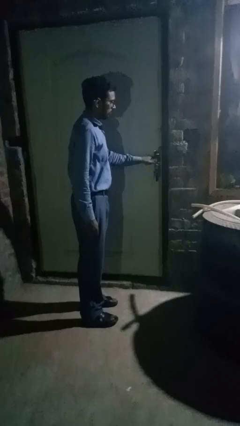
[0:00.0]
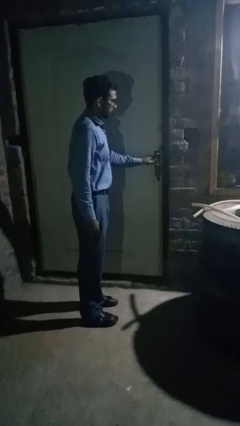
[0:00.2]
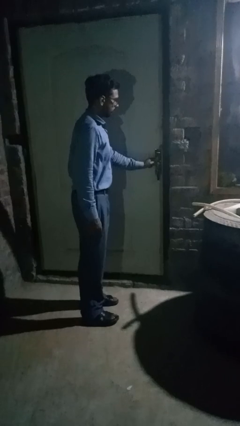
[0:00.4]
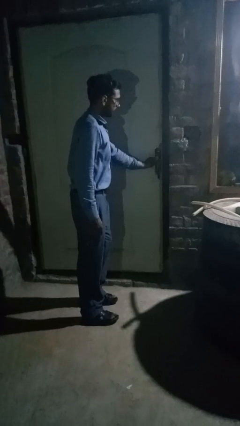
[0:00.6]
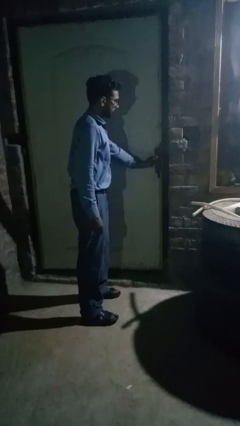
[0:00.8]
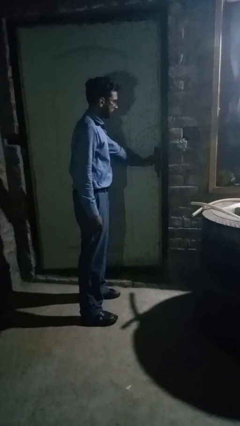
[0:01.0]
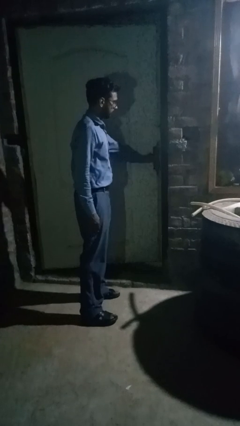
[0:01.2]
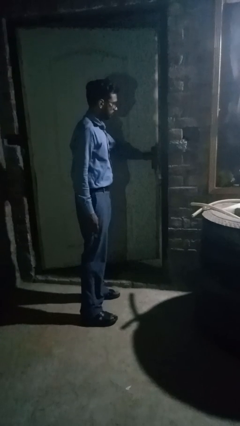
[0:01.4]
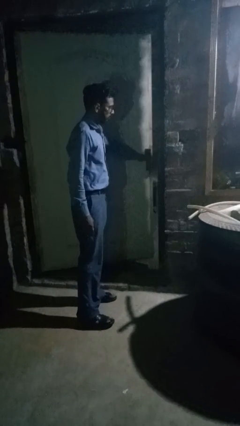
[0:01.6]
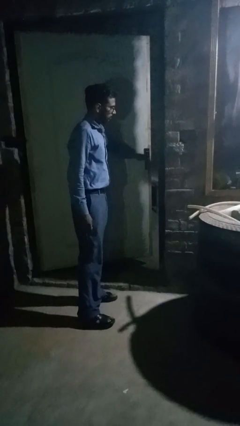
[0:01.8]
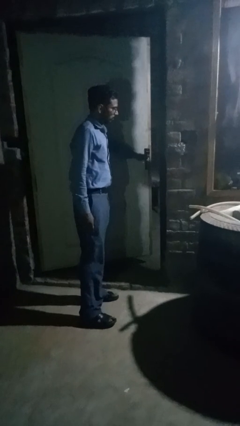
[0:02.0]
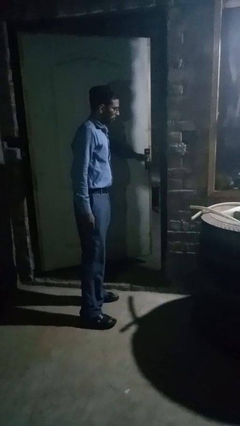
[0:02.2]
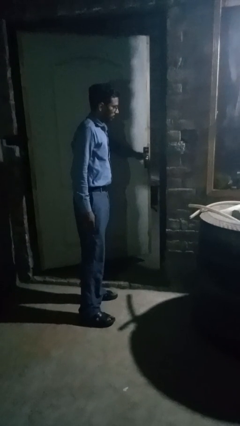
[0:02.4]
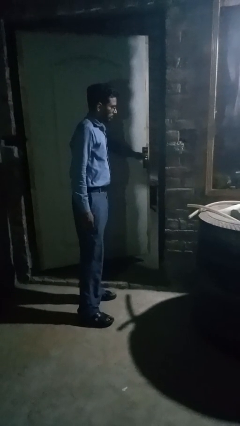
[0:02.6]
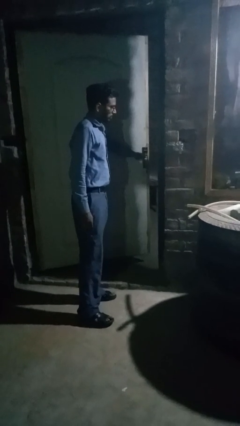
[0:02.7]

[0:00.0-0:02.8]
person opens facility door

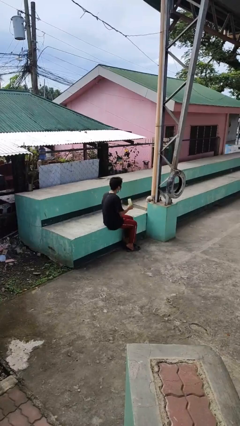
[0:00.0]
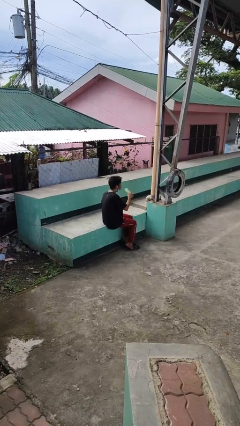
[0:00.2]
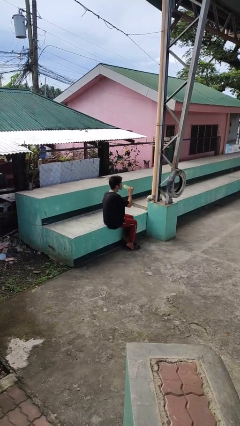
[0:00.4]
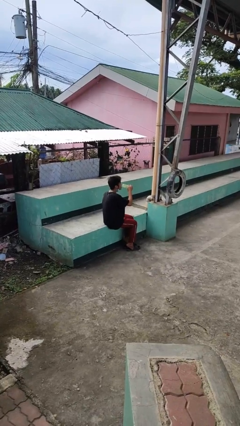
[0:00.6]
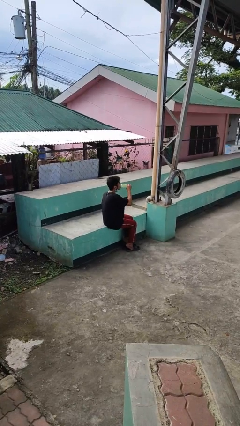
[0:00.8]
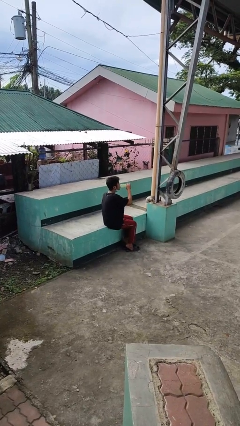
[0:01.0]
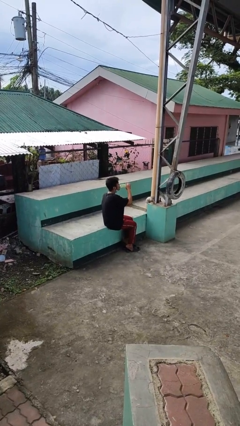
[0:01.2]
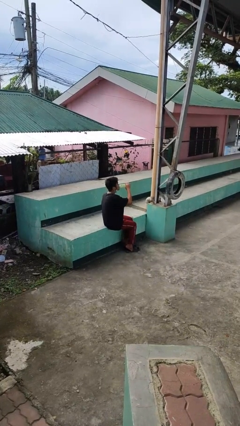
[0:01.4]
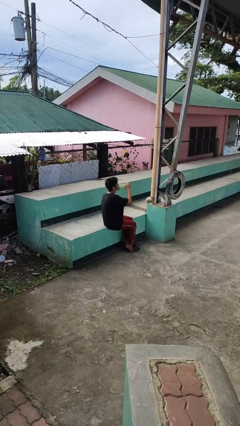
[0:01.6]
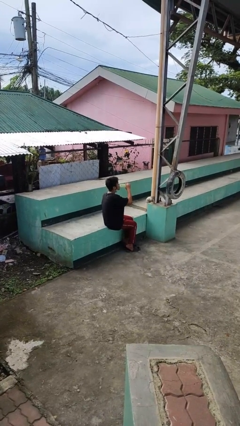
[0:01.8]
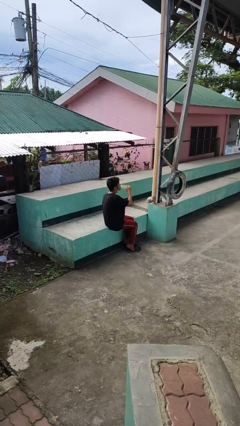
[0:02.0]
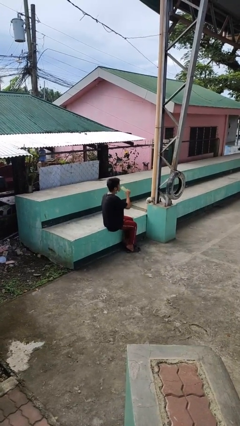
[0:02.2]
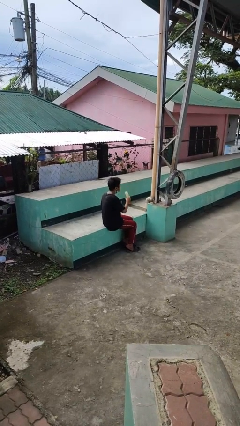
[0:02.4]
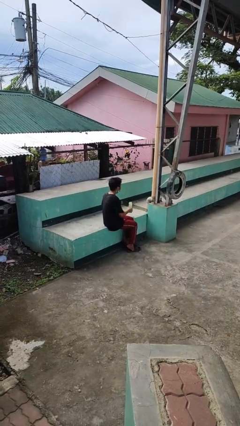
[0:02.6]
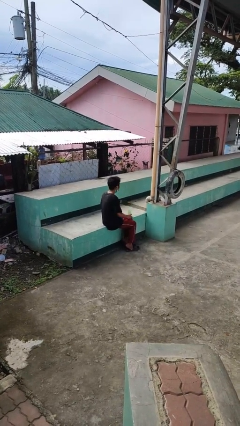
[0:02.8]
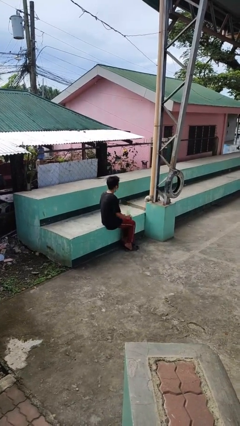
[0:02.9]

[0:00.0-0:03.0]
person drinks from bottle

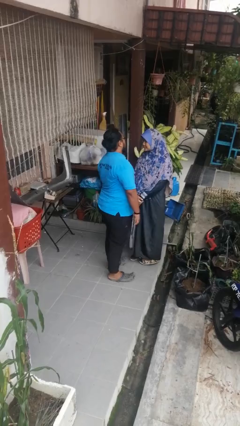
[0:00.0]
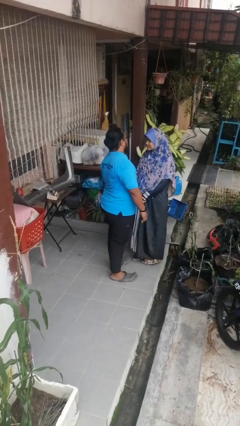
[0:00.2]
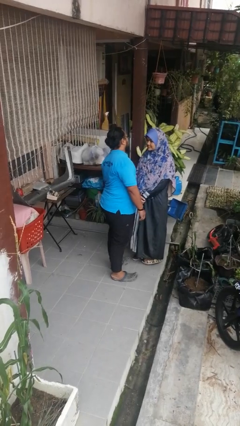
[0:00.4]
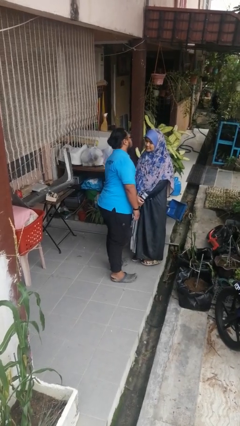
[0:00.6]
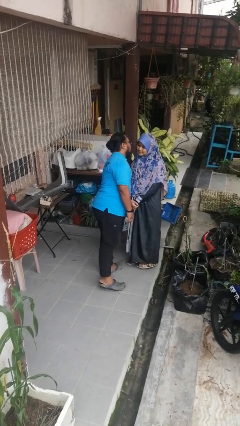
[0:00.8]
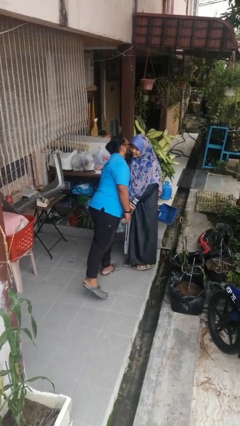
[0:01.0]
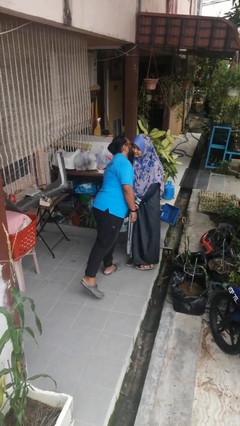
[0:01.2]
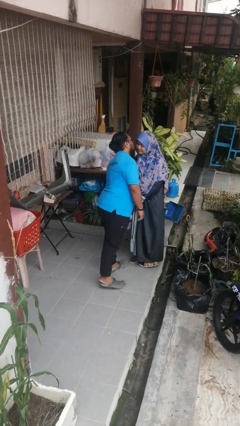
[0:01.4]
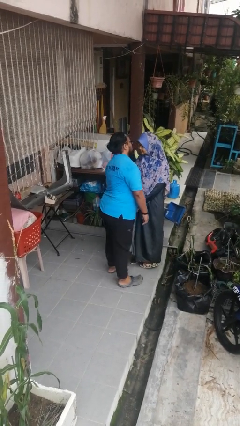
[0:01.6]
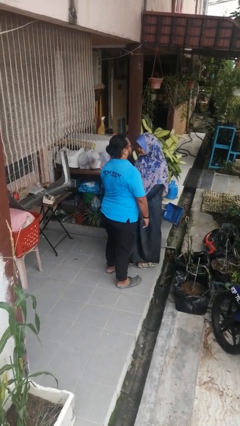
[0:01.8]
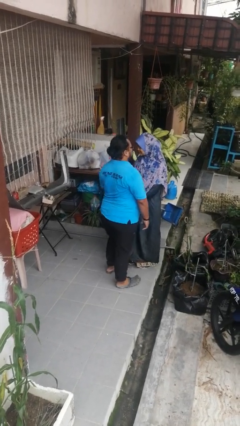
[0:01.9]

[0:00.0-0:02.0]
person kisses cheek of person

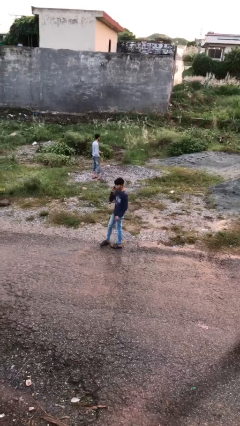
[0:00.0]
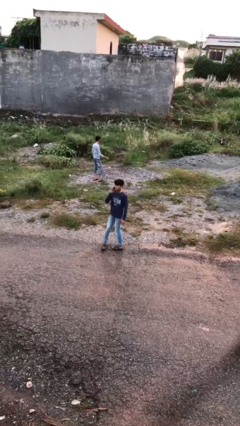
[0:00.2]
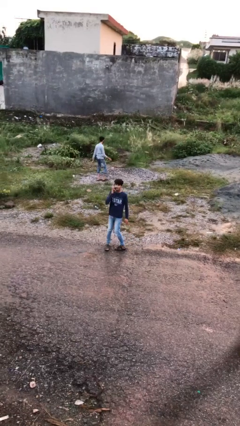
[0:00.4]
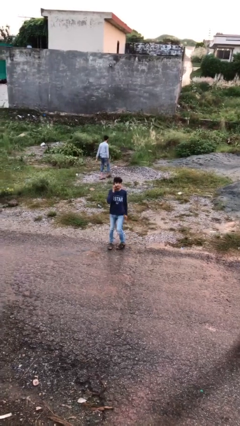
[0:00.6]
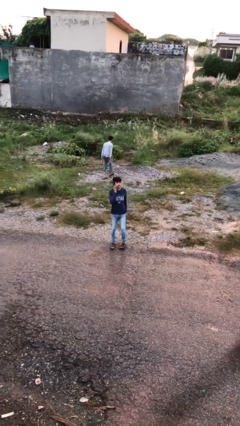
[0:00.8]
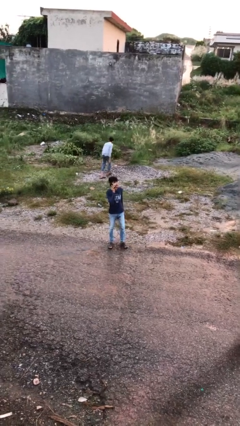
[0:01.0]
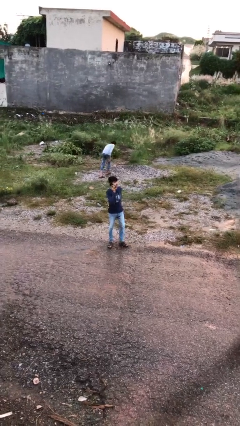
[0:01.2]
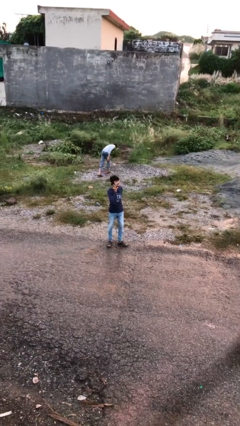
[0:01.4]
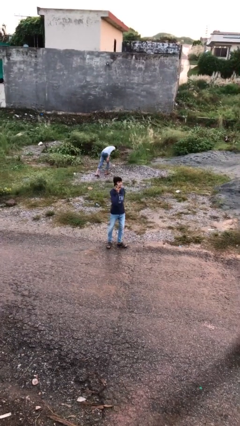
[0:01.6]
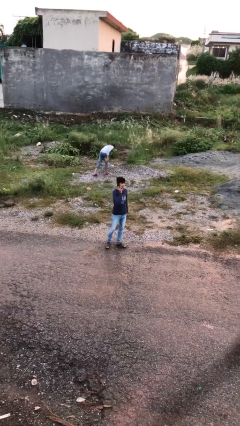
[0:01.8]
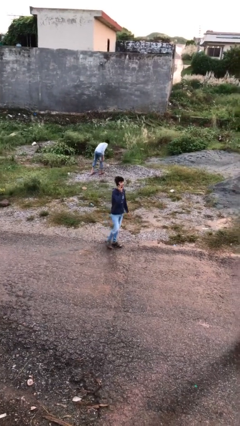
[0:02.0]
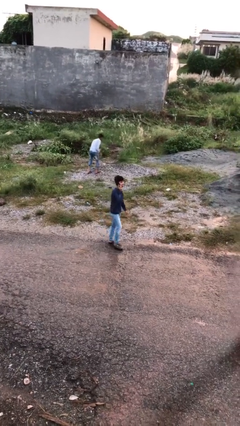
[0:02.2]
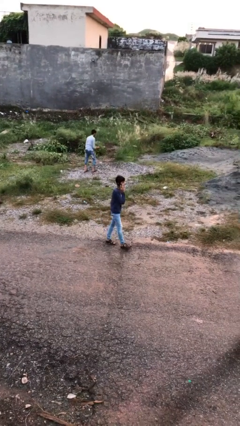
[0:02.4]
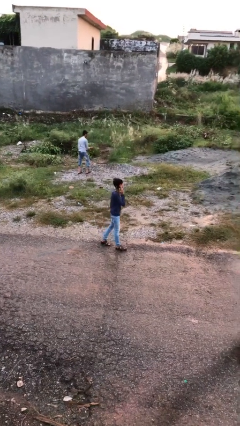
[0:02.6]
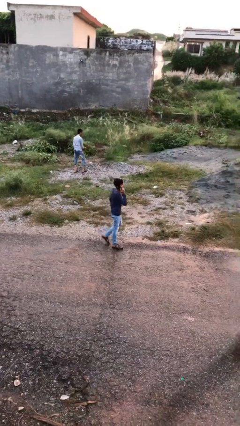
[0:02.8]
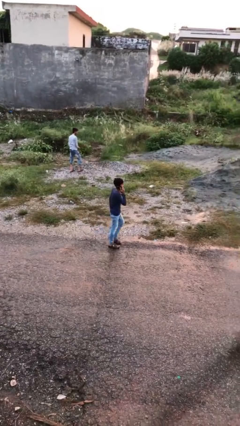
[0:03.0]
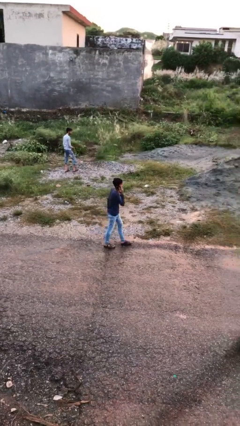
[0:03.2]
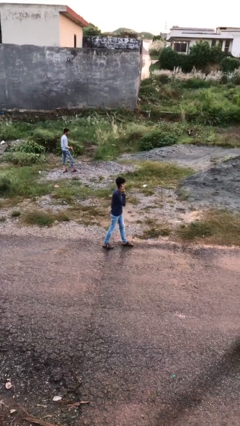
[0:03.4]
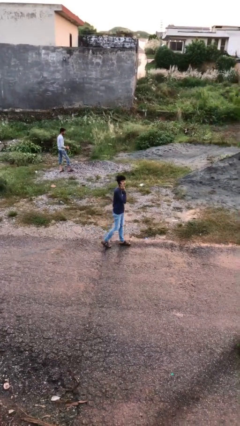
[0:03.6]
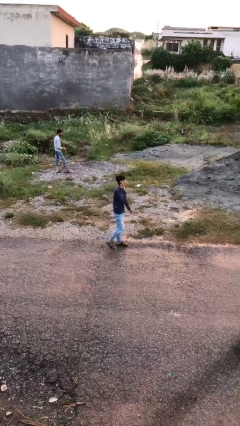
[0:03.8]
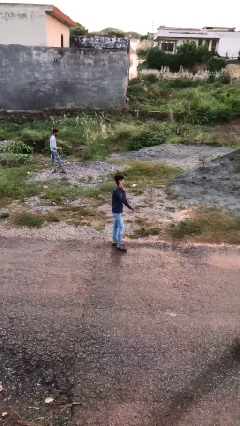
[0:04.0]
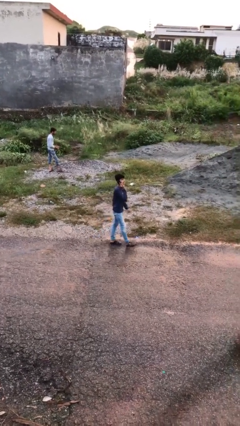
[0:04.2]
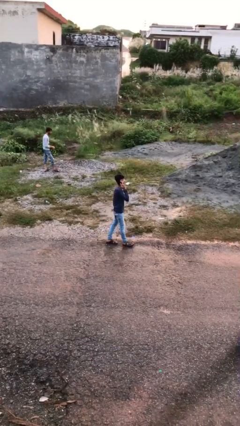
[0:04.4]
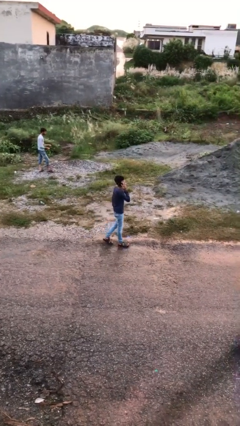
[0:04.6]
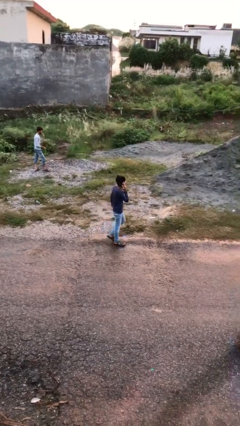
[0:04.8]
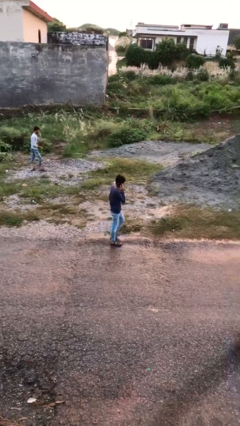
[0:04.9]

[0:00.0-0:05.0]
person talks on phone

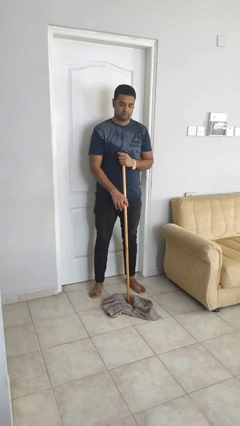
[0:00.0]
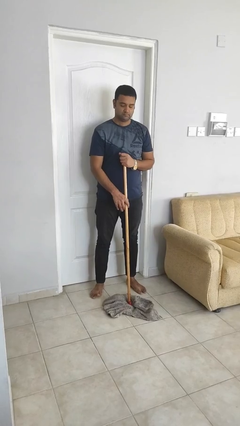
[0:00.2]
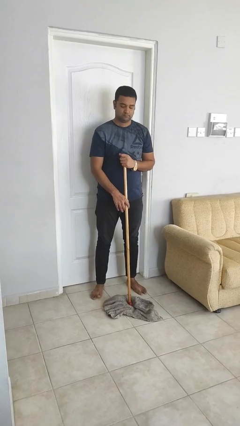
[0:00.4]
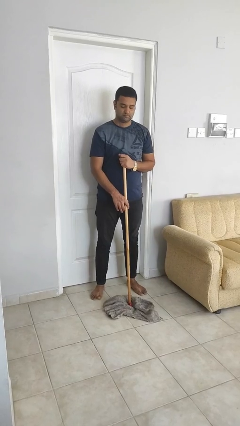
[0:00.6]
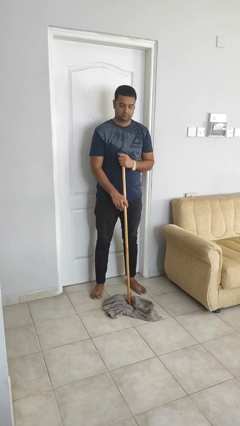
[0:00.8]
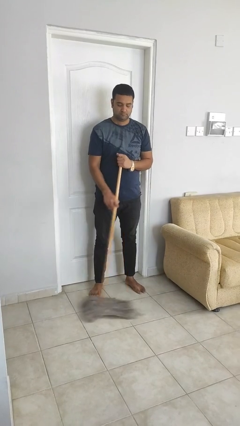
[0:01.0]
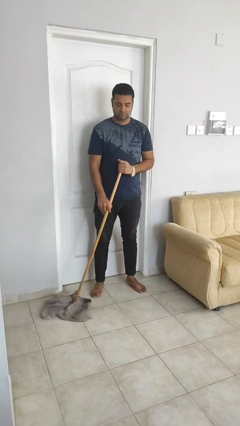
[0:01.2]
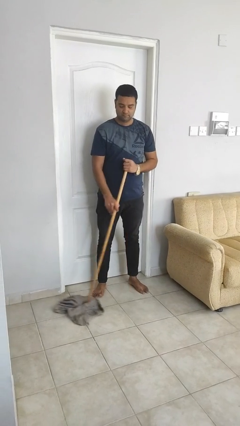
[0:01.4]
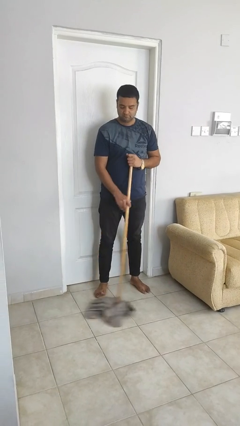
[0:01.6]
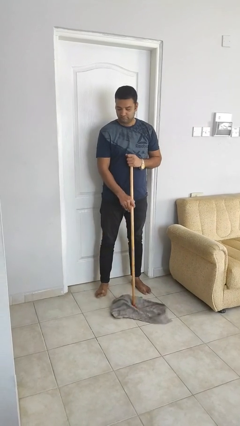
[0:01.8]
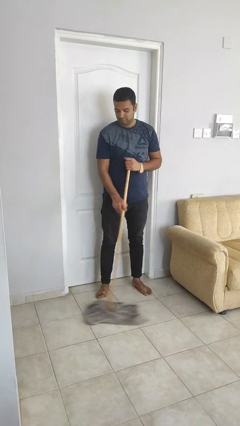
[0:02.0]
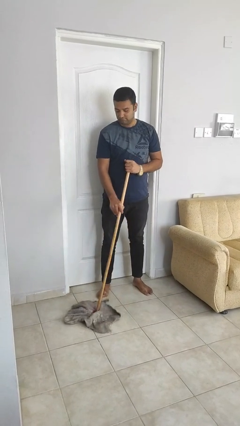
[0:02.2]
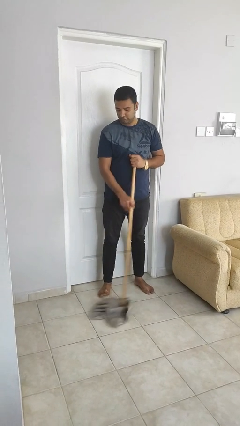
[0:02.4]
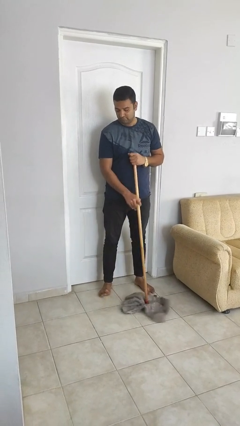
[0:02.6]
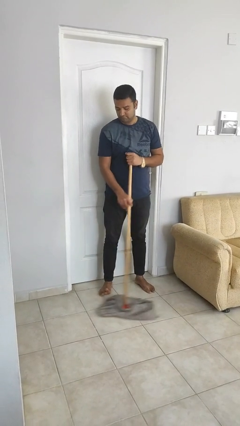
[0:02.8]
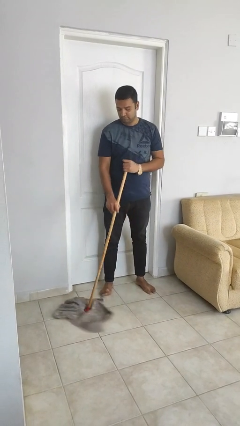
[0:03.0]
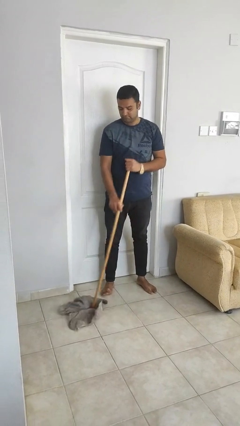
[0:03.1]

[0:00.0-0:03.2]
person mops

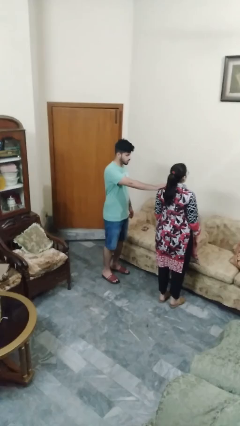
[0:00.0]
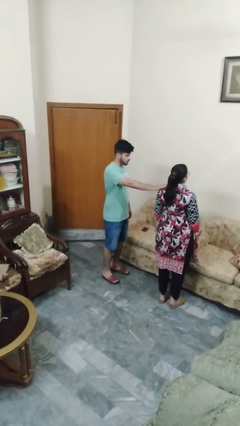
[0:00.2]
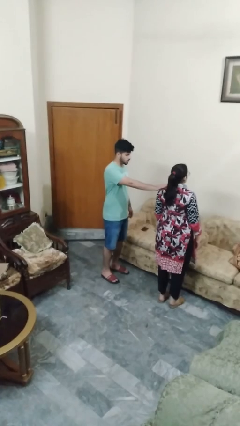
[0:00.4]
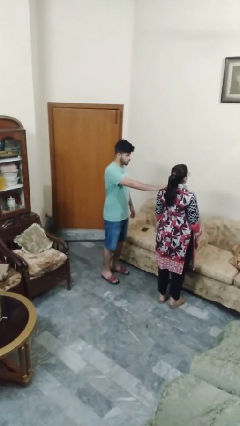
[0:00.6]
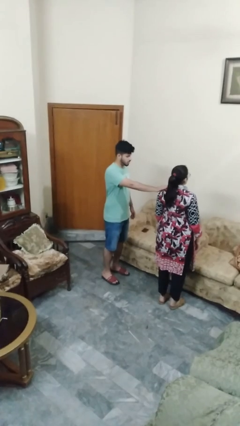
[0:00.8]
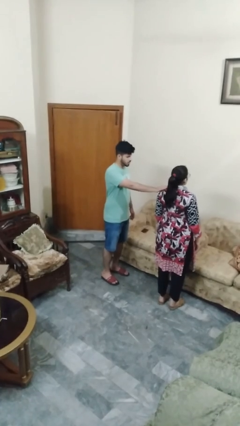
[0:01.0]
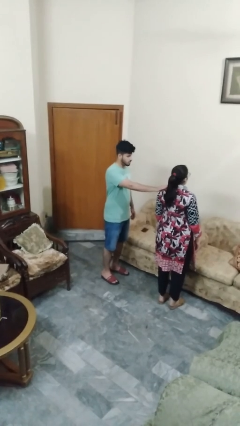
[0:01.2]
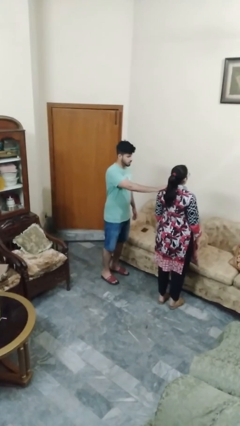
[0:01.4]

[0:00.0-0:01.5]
person grabs person by shoulder
